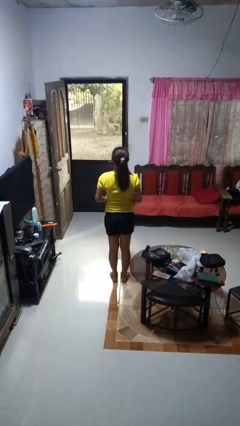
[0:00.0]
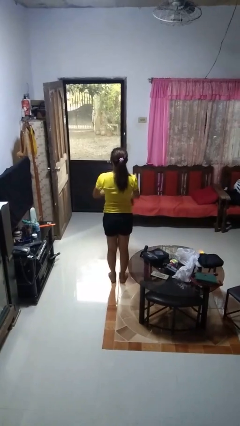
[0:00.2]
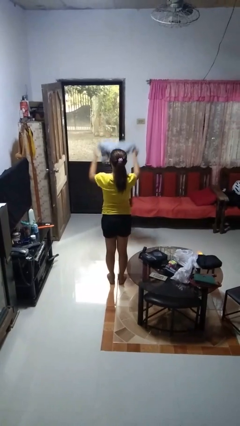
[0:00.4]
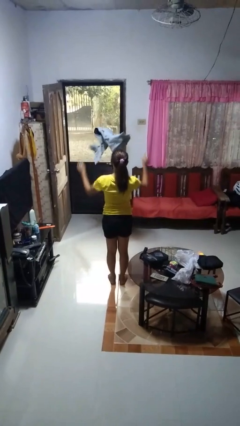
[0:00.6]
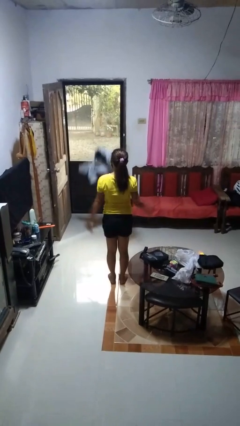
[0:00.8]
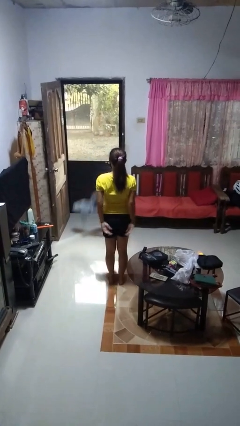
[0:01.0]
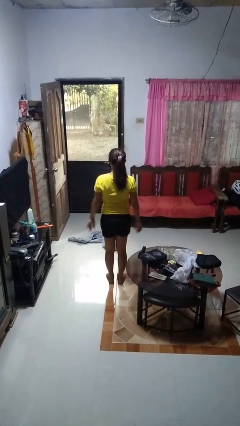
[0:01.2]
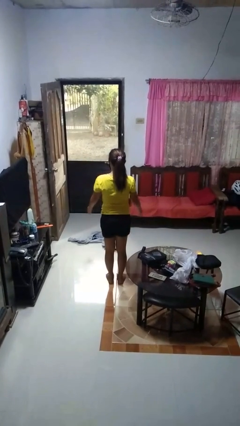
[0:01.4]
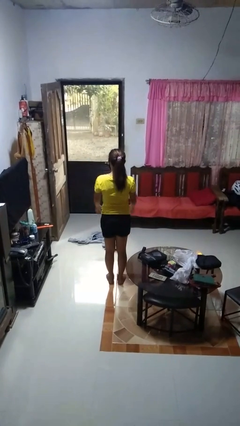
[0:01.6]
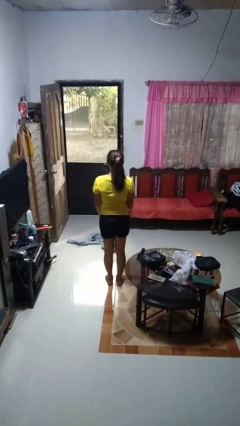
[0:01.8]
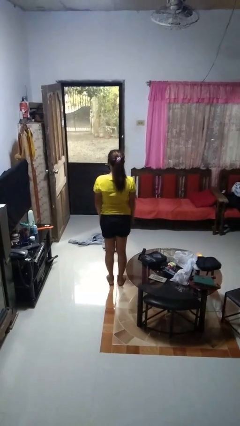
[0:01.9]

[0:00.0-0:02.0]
person throws object into air

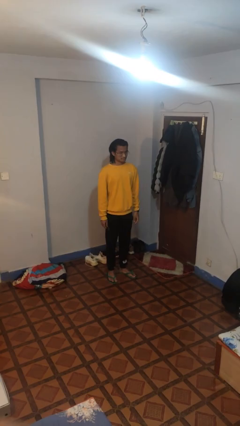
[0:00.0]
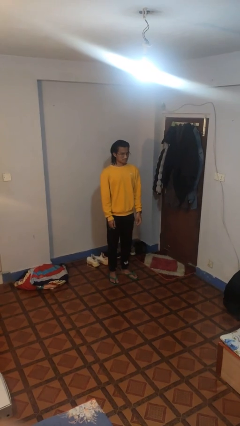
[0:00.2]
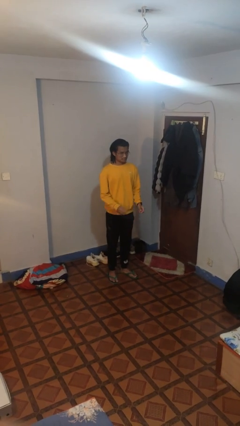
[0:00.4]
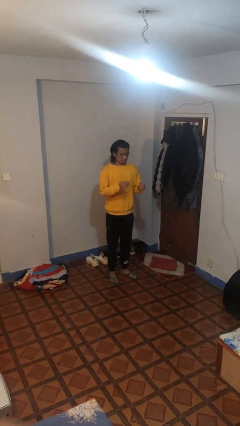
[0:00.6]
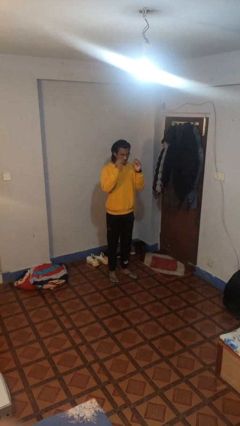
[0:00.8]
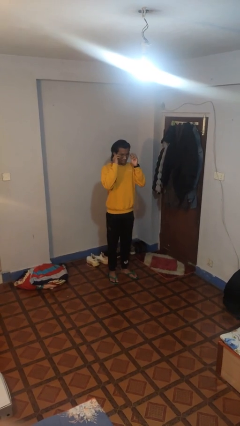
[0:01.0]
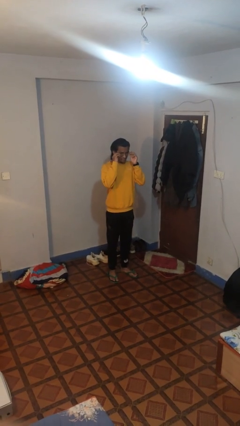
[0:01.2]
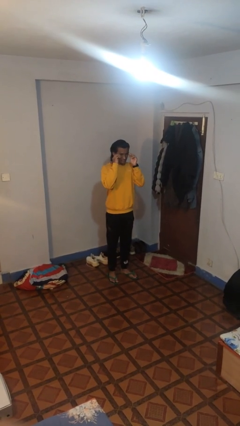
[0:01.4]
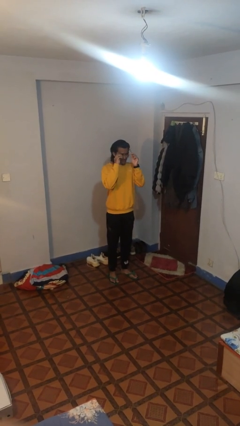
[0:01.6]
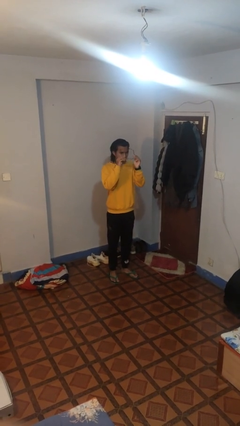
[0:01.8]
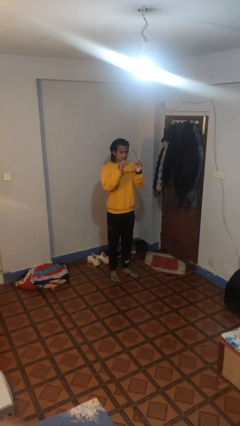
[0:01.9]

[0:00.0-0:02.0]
person takes off glasses

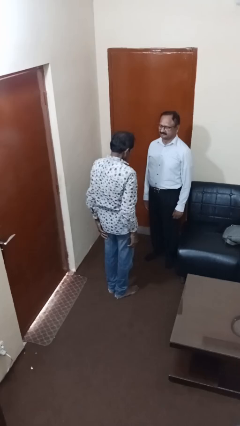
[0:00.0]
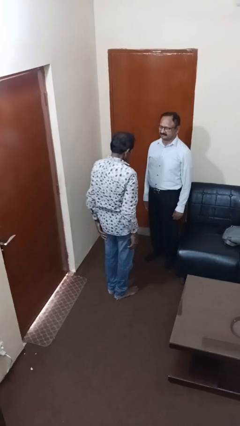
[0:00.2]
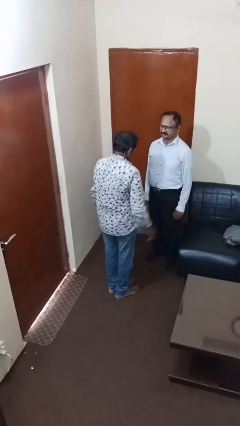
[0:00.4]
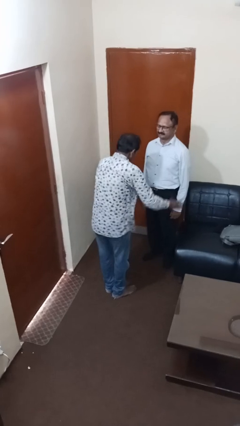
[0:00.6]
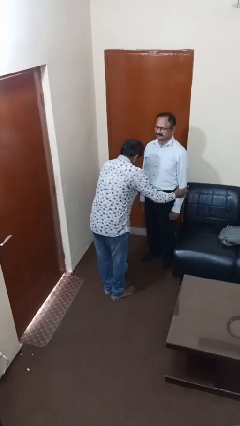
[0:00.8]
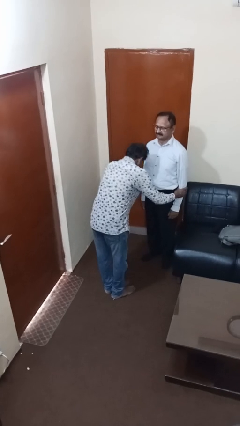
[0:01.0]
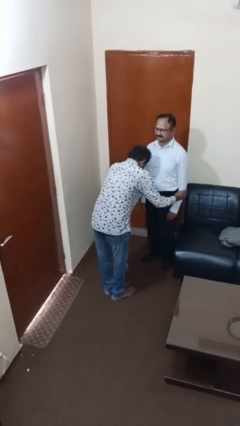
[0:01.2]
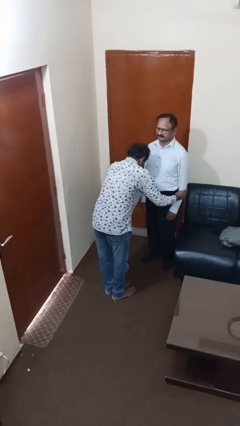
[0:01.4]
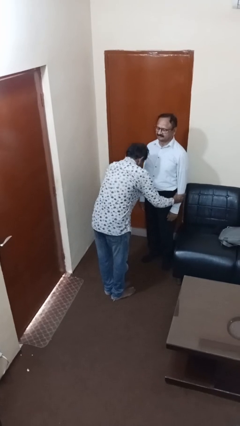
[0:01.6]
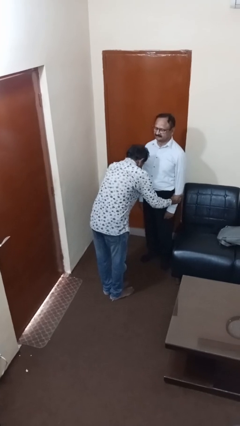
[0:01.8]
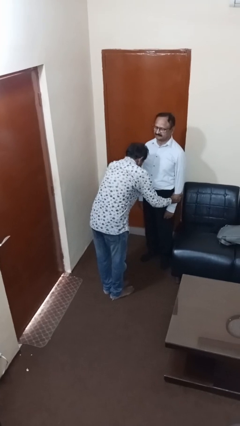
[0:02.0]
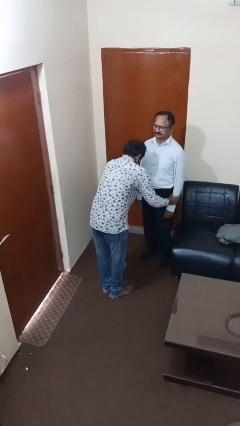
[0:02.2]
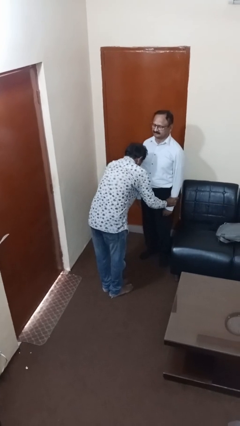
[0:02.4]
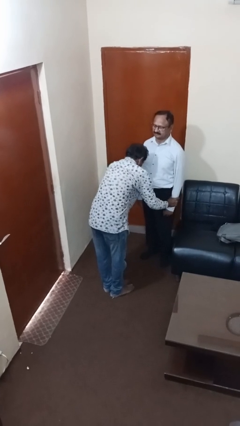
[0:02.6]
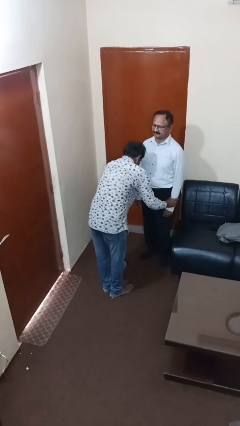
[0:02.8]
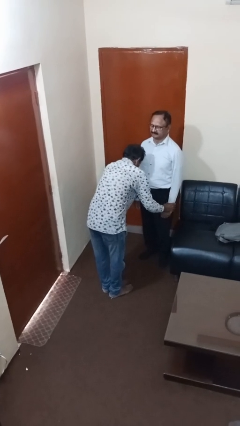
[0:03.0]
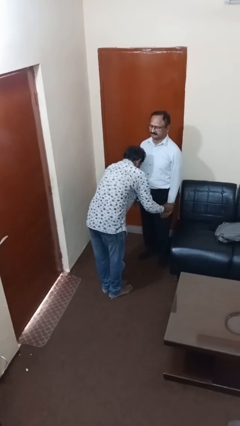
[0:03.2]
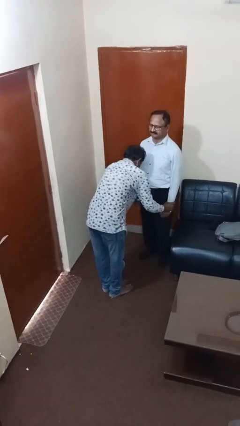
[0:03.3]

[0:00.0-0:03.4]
person grabs person by forearm

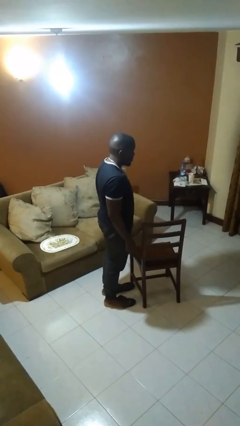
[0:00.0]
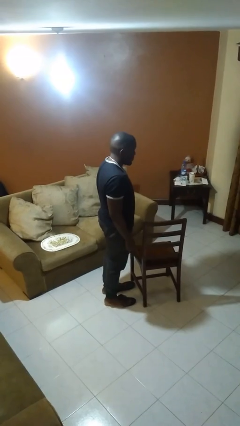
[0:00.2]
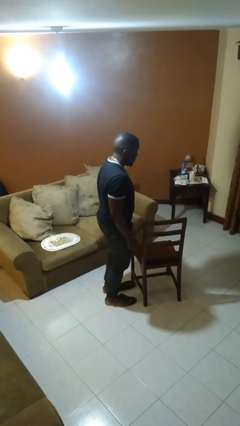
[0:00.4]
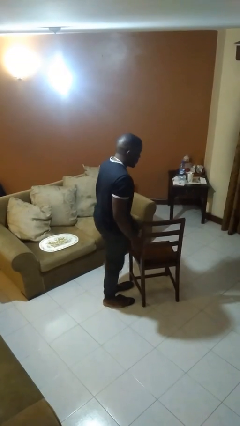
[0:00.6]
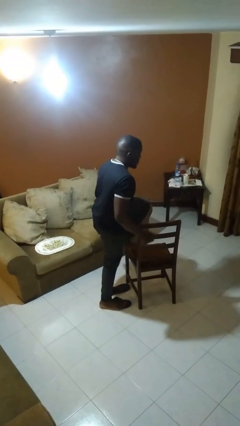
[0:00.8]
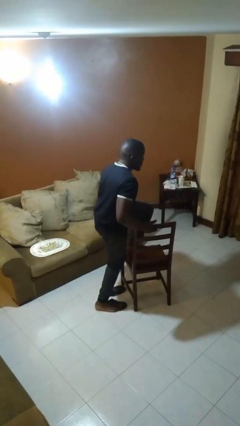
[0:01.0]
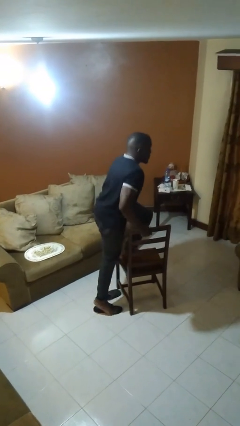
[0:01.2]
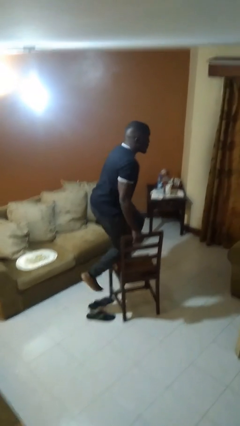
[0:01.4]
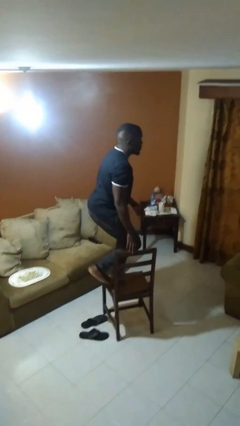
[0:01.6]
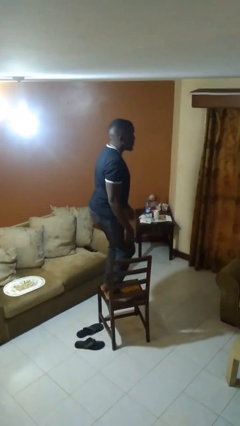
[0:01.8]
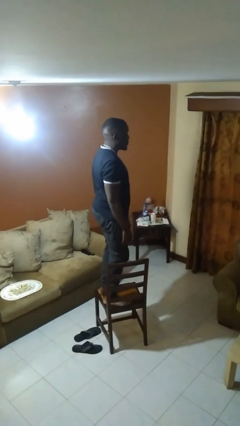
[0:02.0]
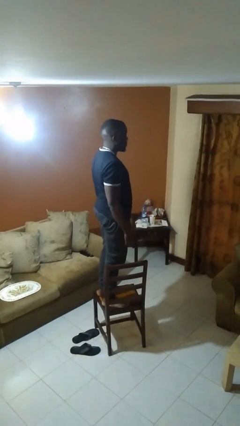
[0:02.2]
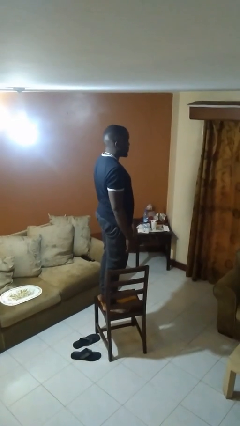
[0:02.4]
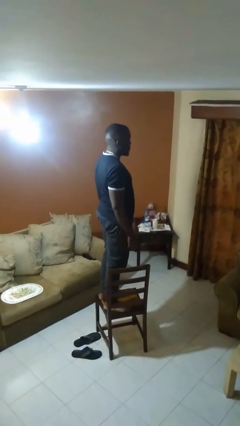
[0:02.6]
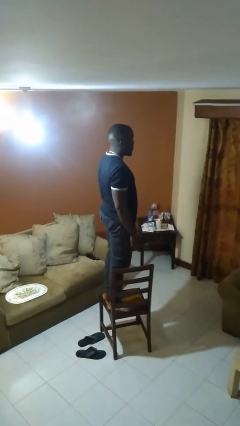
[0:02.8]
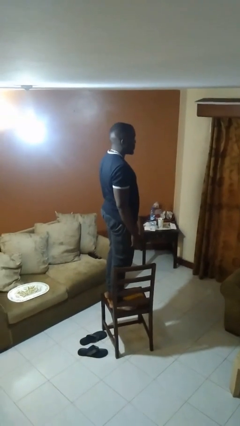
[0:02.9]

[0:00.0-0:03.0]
person climbs on chair

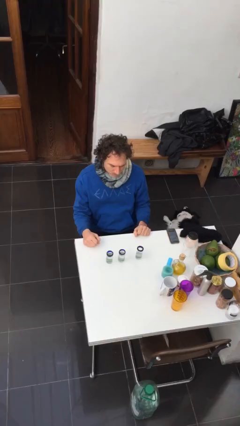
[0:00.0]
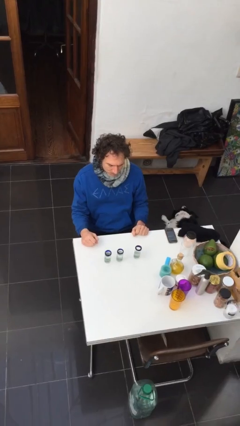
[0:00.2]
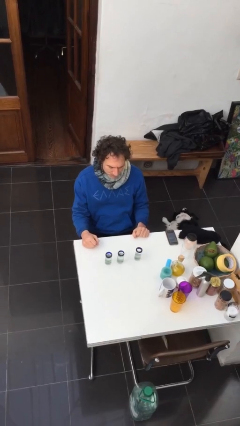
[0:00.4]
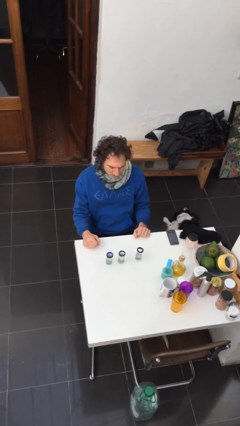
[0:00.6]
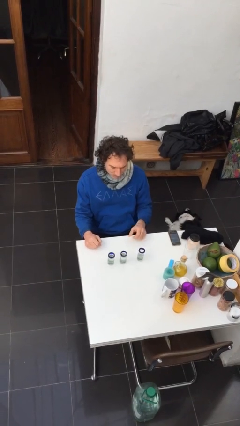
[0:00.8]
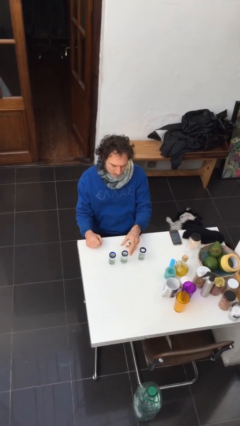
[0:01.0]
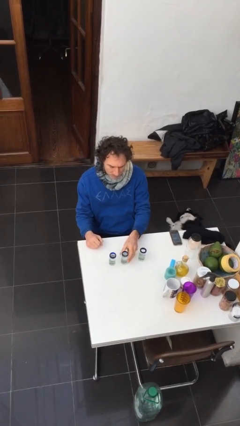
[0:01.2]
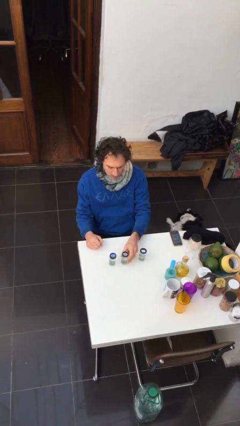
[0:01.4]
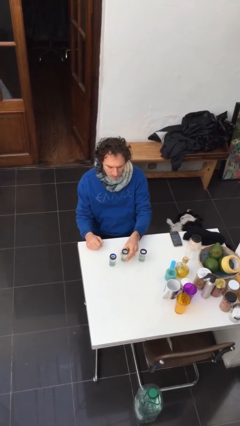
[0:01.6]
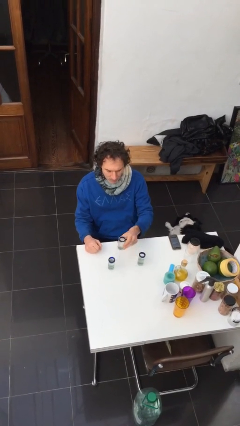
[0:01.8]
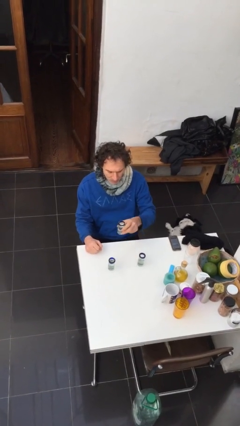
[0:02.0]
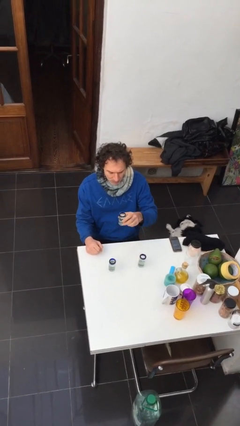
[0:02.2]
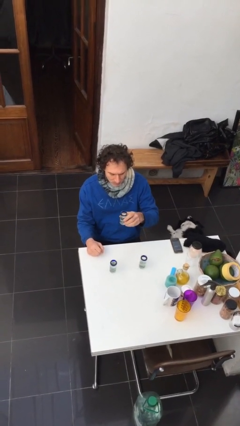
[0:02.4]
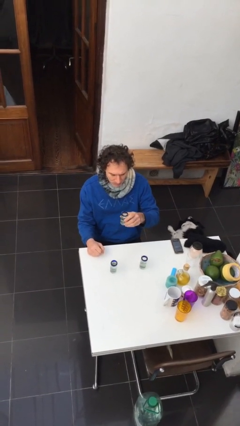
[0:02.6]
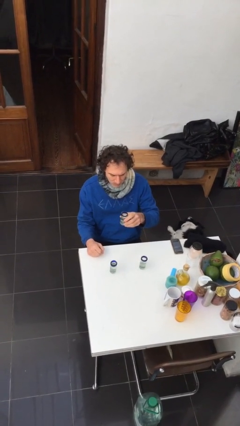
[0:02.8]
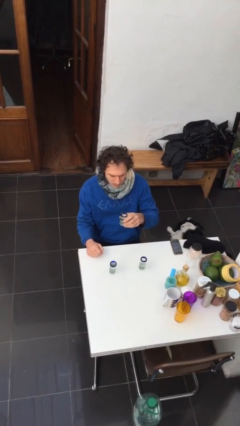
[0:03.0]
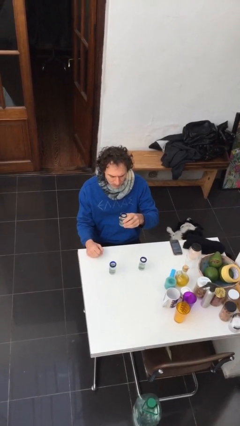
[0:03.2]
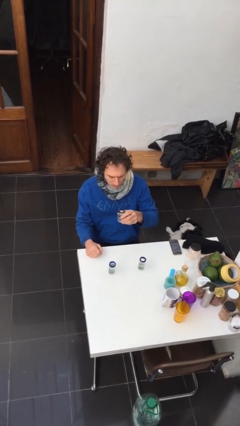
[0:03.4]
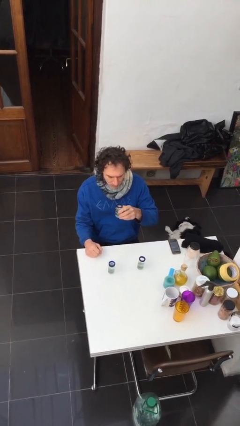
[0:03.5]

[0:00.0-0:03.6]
person picks up object from table

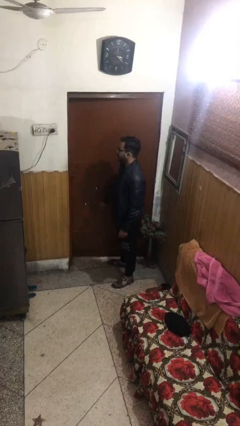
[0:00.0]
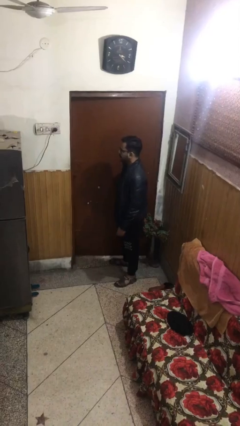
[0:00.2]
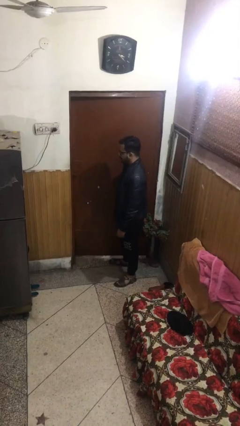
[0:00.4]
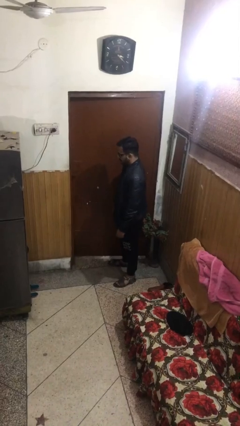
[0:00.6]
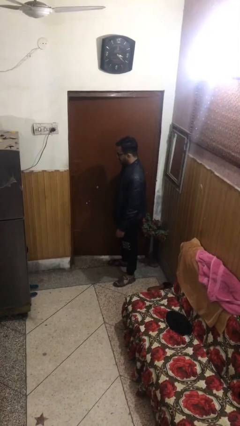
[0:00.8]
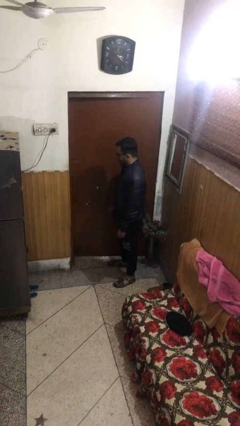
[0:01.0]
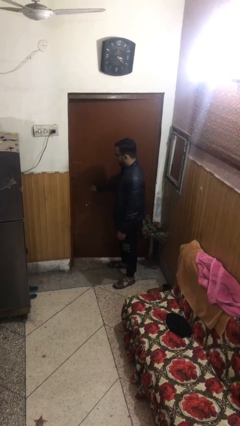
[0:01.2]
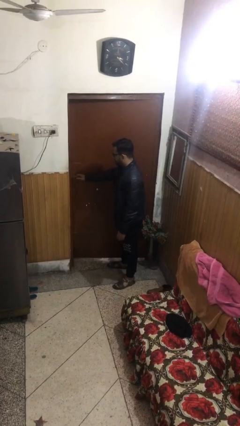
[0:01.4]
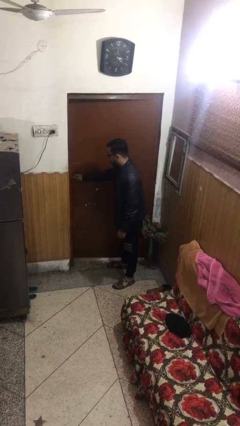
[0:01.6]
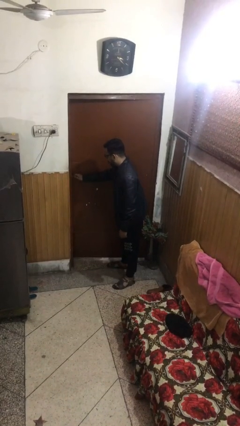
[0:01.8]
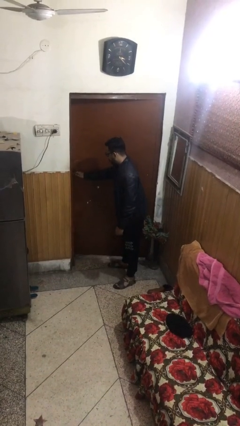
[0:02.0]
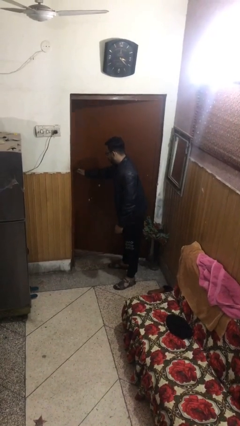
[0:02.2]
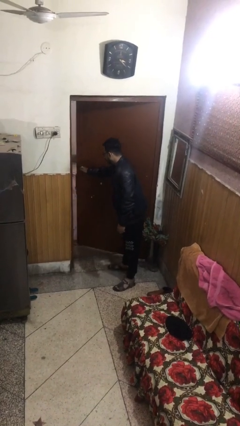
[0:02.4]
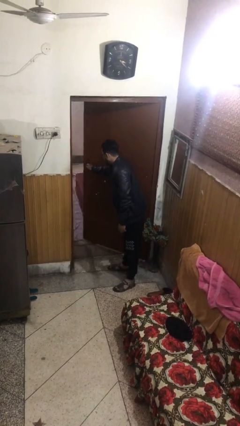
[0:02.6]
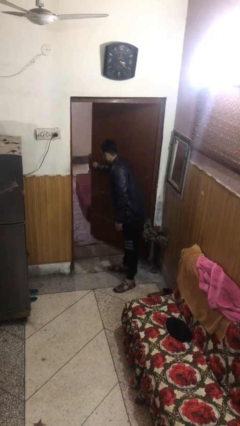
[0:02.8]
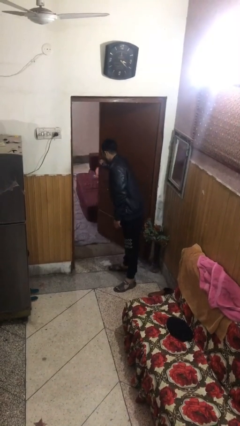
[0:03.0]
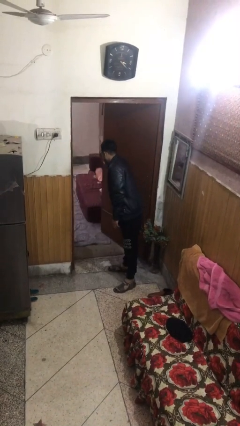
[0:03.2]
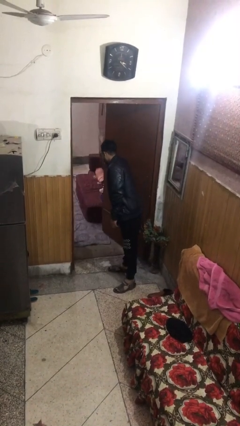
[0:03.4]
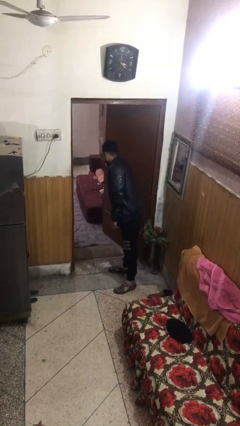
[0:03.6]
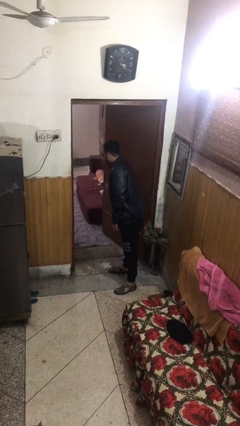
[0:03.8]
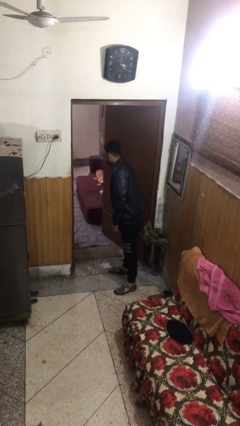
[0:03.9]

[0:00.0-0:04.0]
person opens facility door
